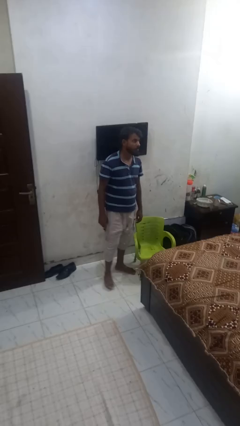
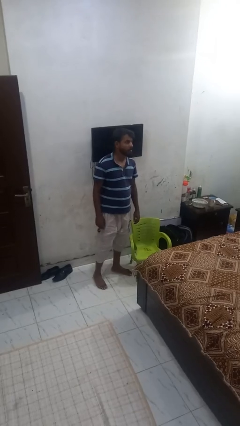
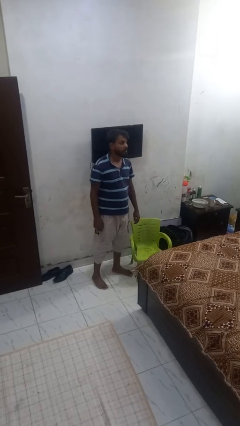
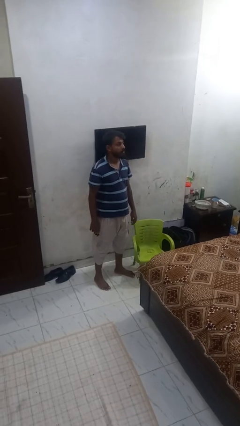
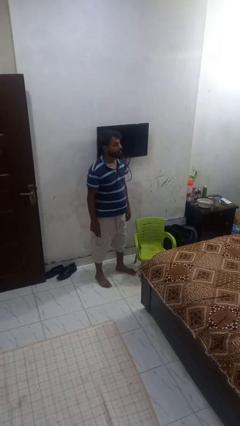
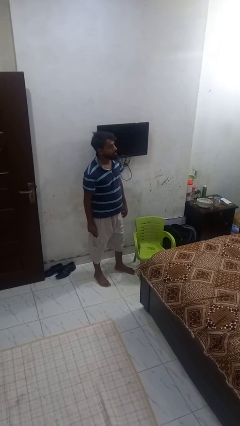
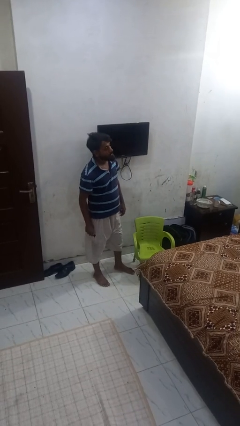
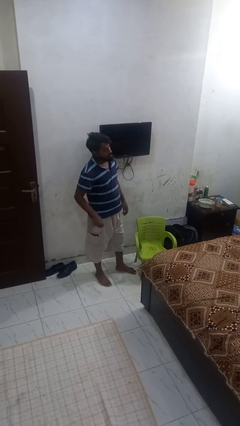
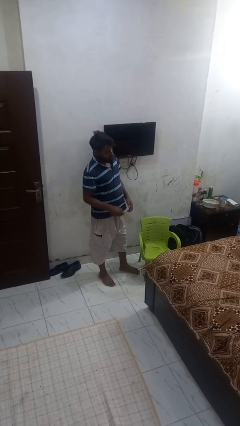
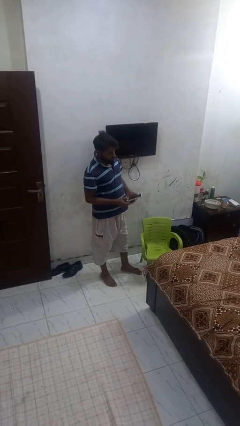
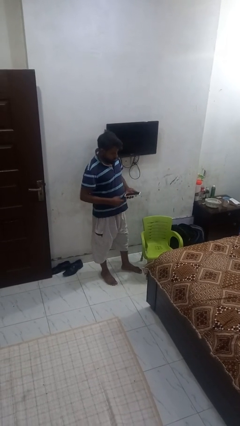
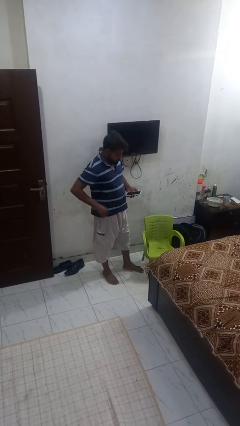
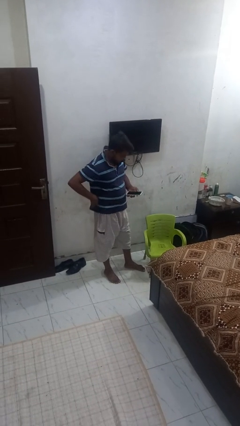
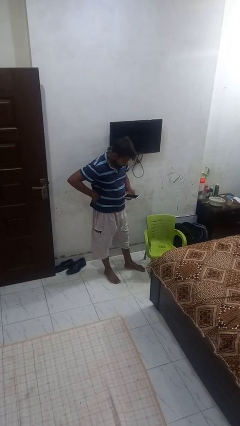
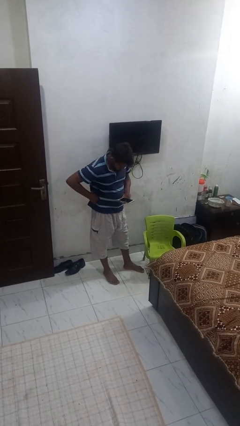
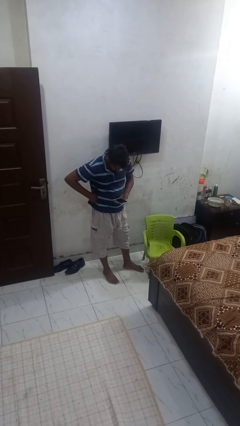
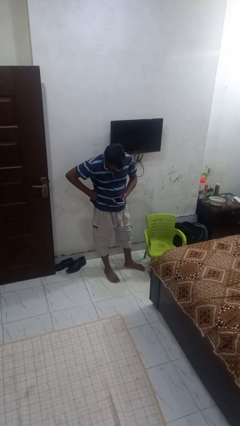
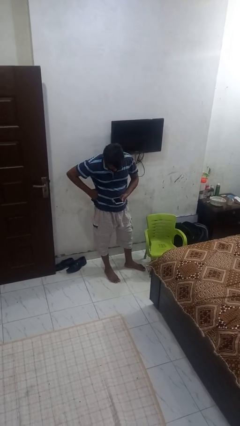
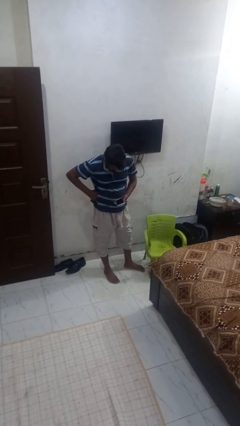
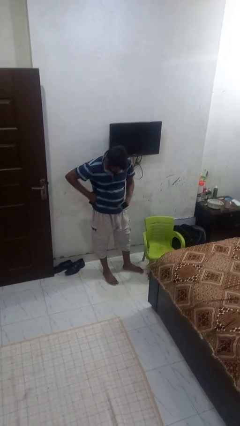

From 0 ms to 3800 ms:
person takes phone from pocket

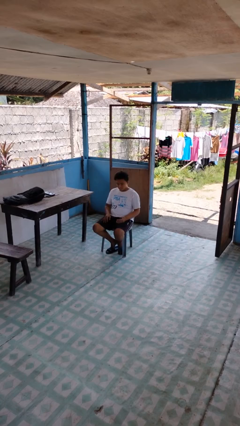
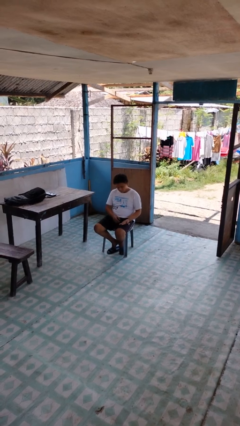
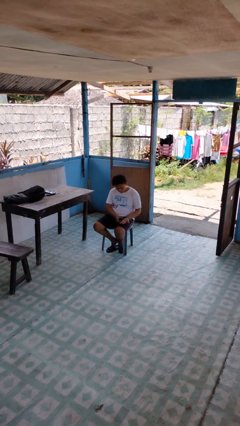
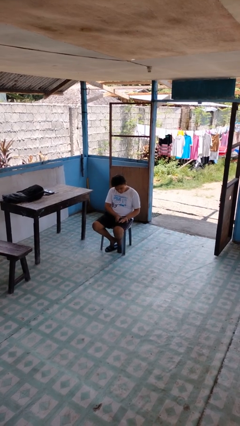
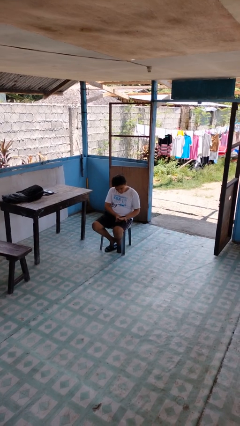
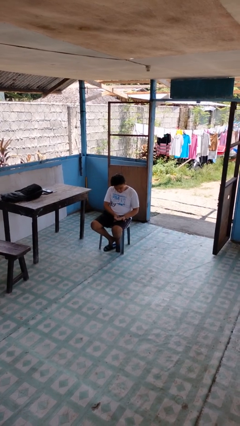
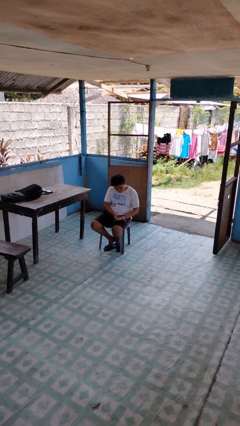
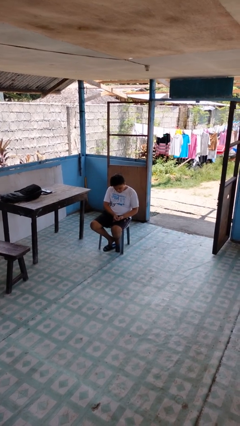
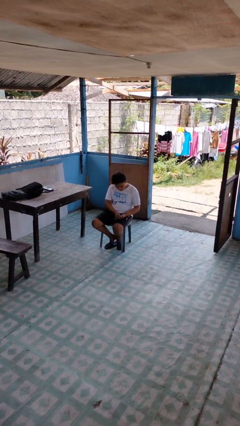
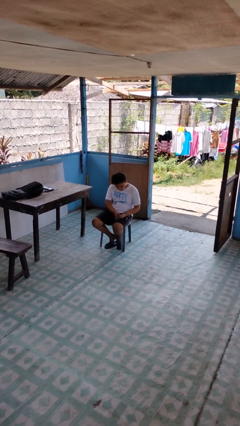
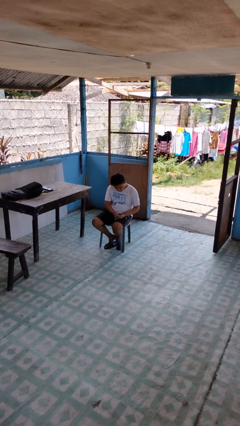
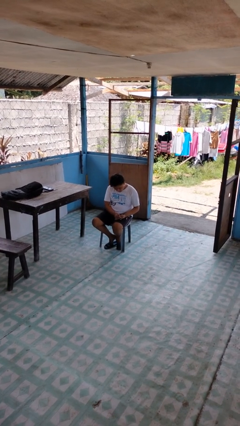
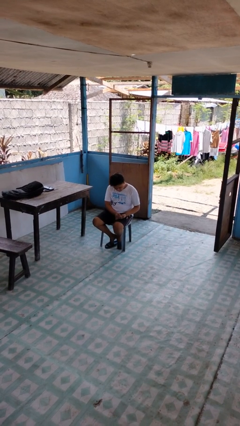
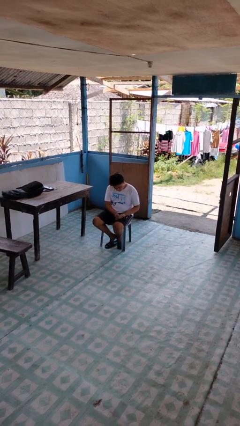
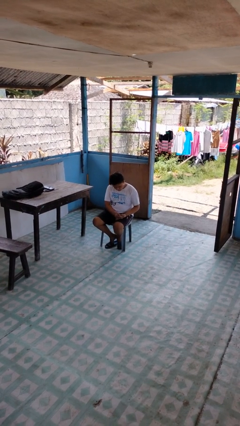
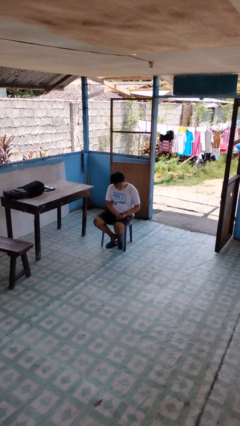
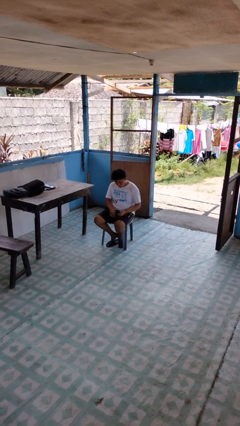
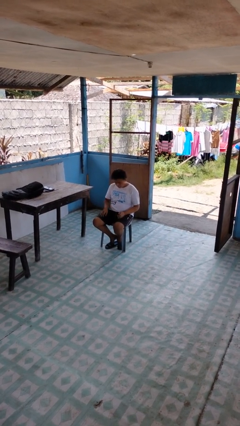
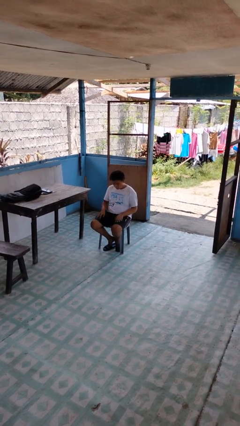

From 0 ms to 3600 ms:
person looks at hands in lap

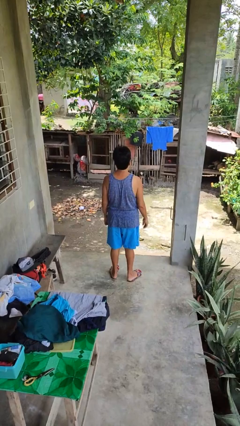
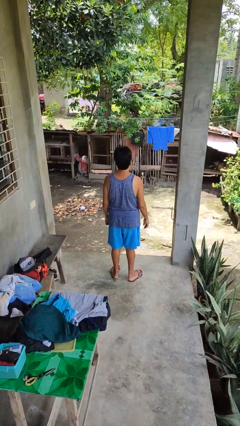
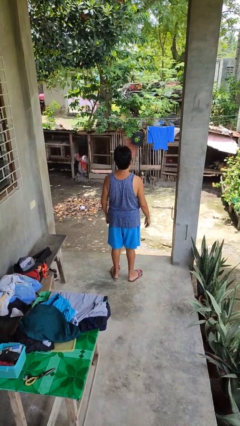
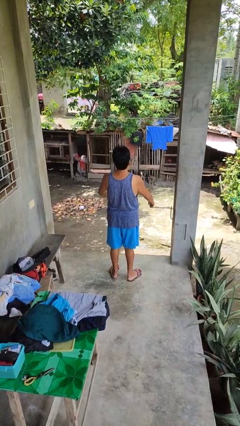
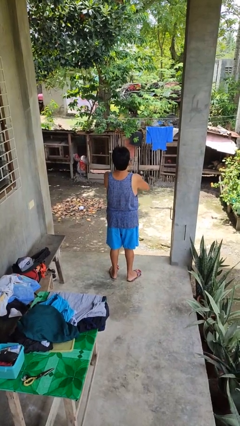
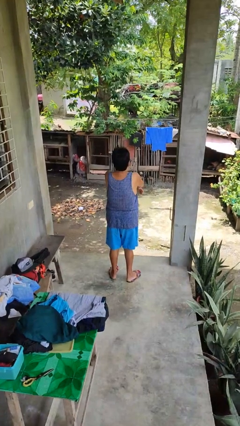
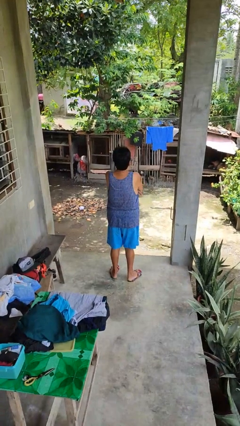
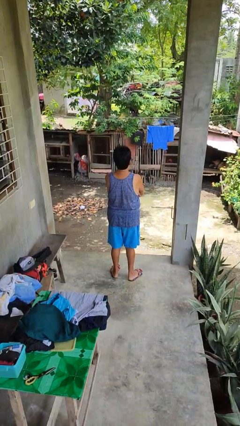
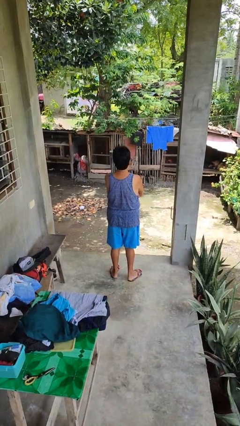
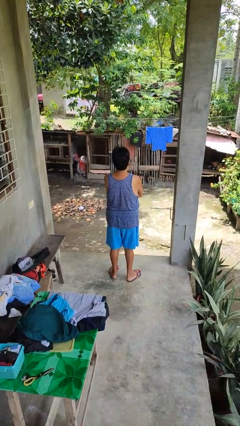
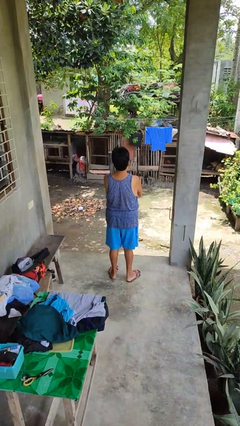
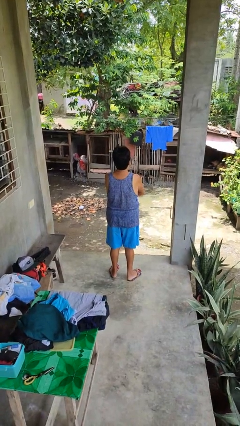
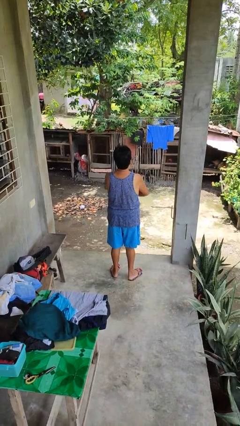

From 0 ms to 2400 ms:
person crosses arms

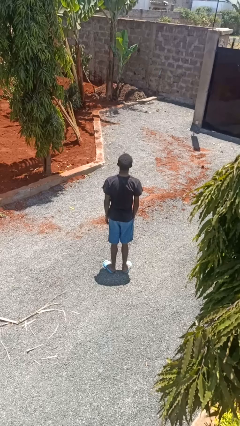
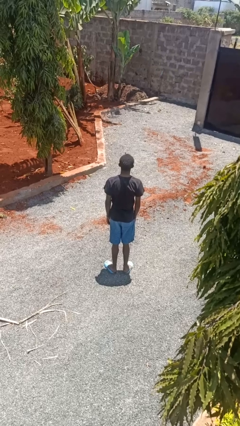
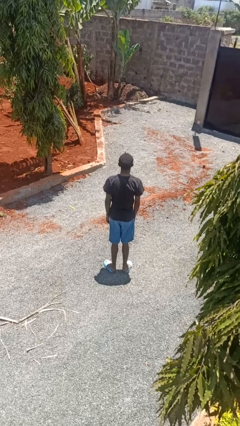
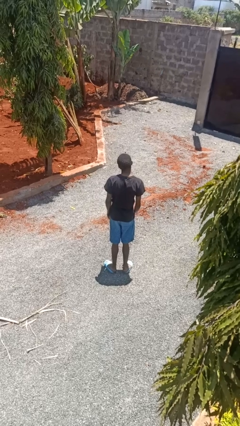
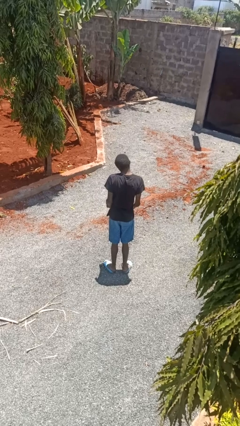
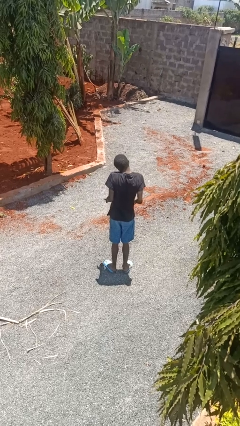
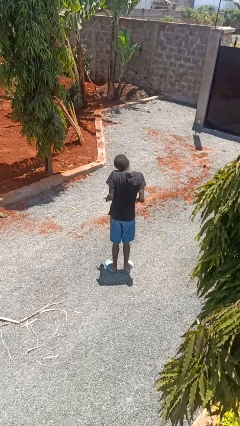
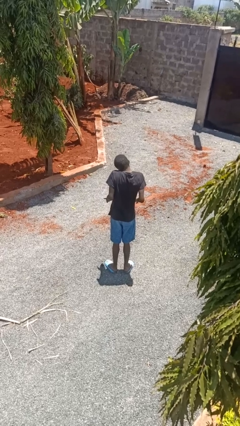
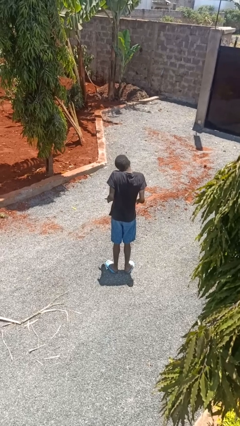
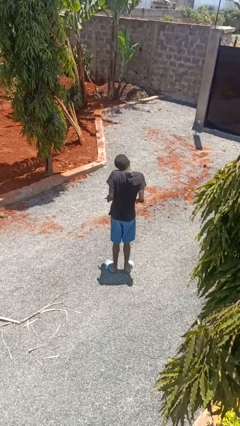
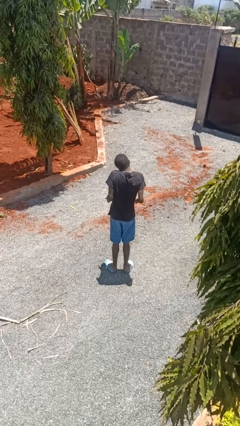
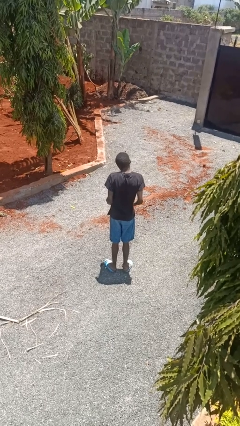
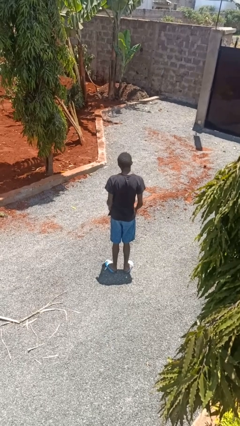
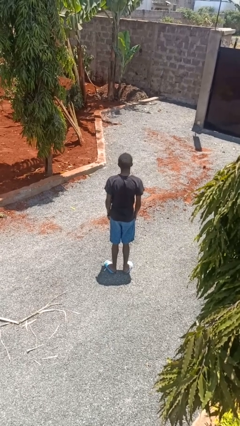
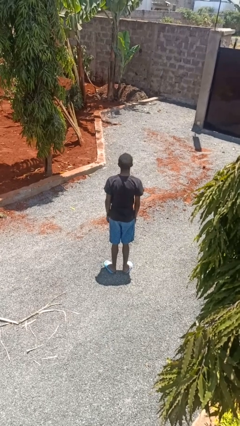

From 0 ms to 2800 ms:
person shrugs

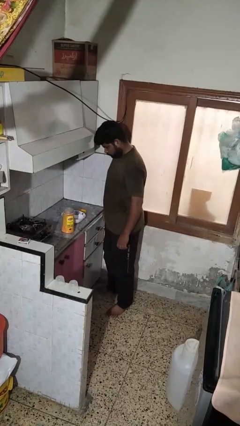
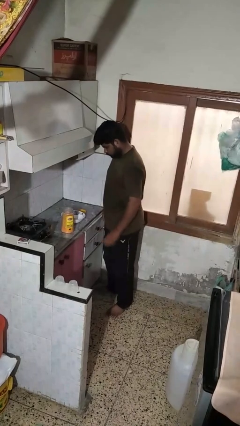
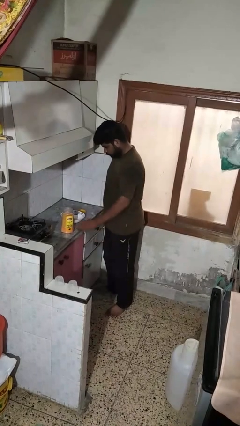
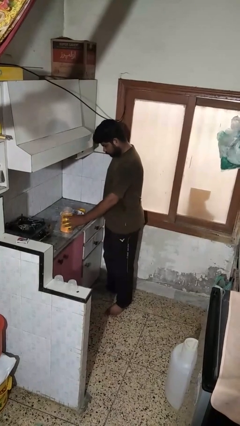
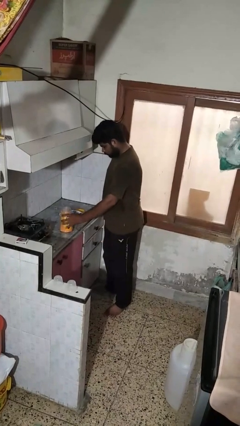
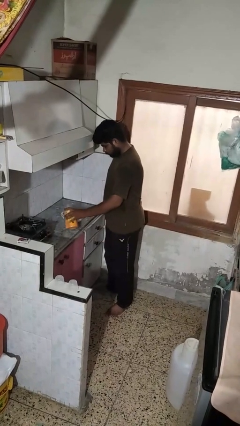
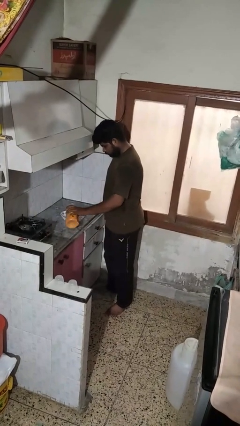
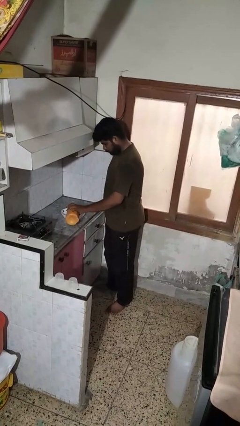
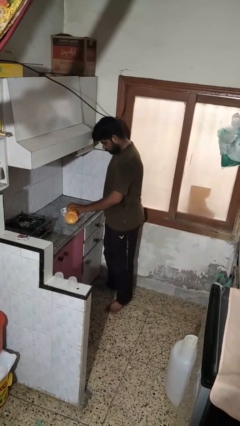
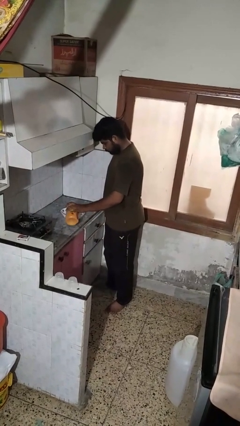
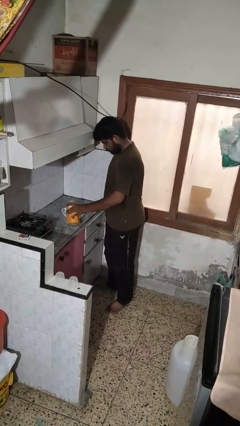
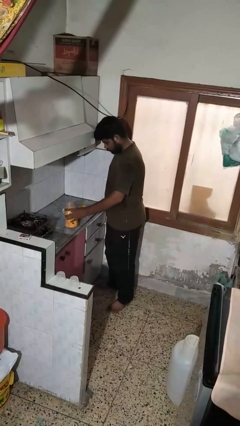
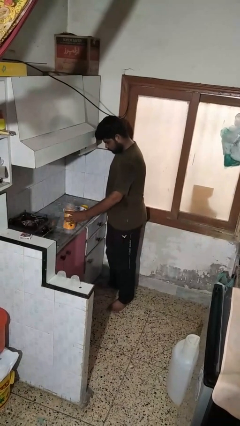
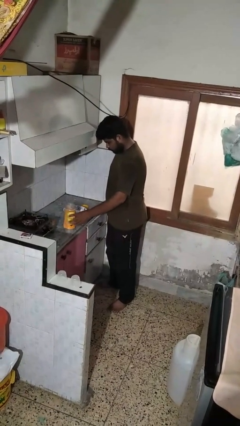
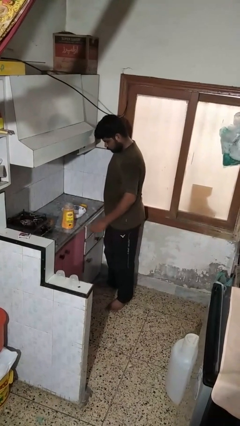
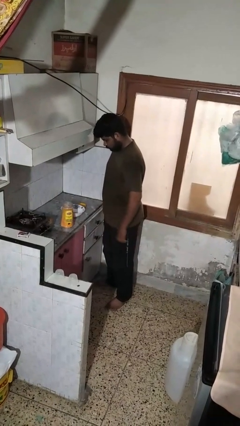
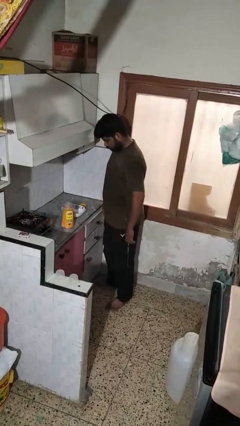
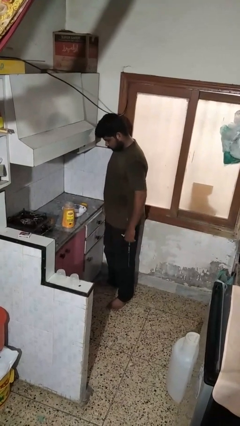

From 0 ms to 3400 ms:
person pours into bowl

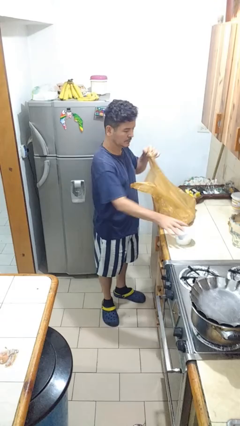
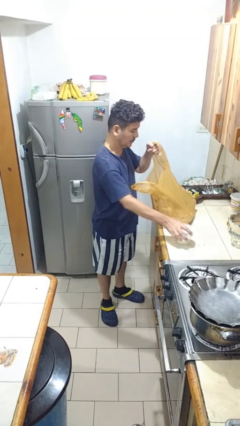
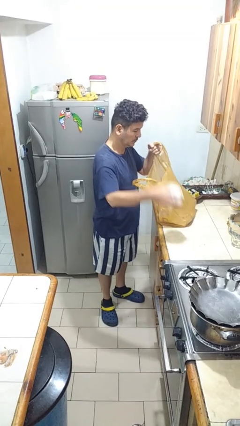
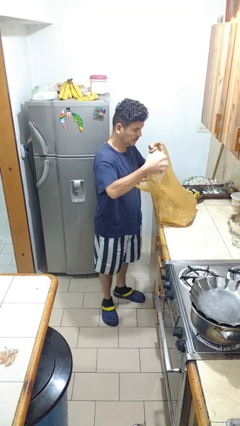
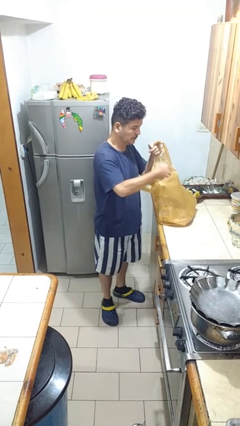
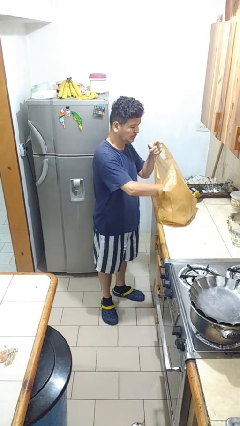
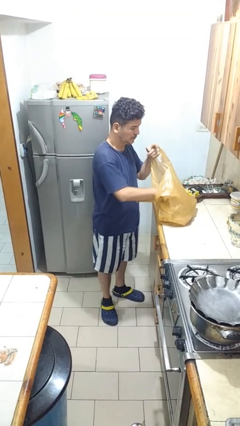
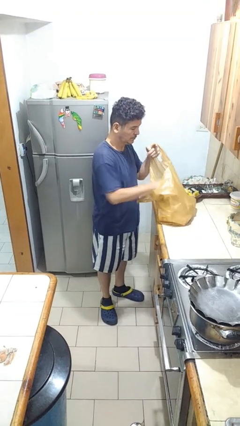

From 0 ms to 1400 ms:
person puts object into bag
